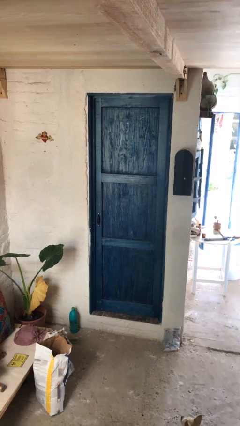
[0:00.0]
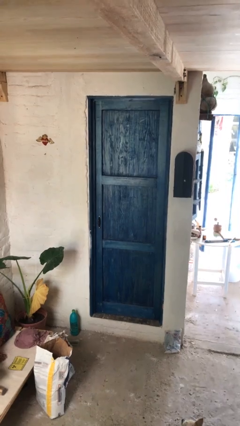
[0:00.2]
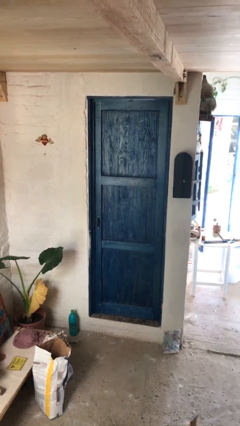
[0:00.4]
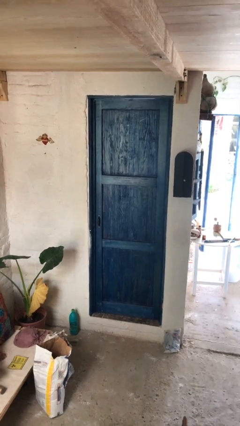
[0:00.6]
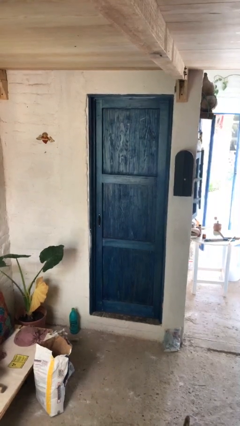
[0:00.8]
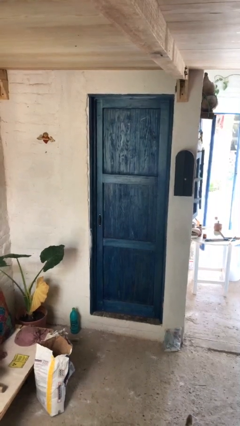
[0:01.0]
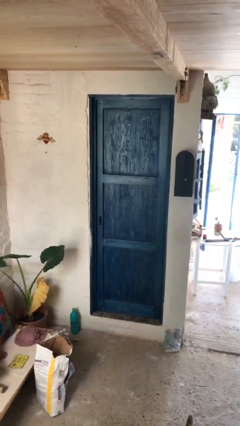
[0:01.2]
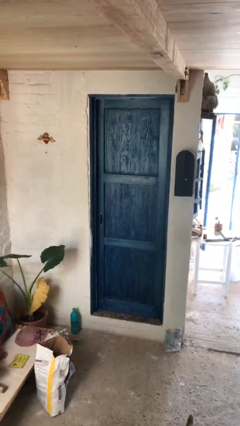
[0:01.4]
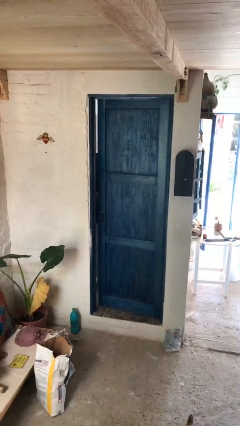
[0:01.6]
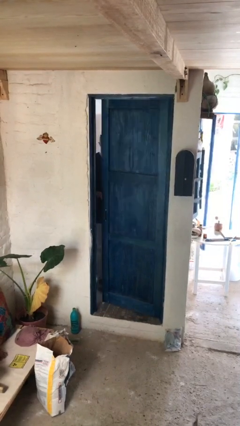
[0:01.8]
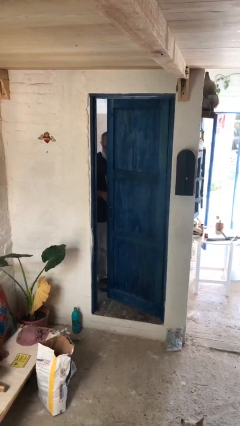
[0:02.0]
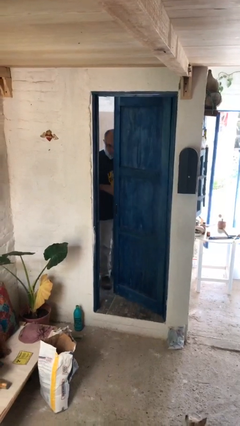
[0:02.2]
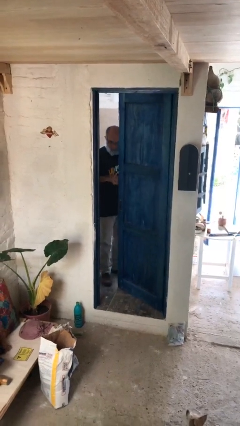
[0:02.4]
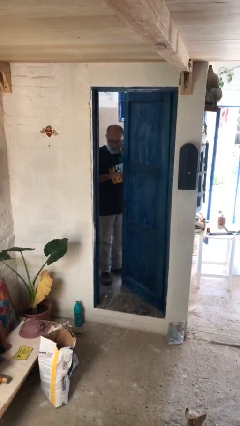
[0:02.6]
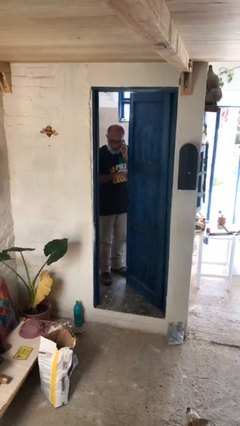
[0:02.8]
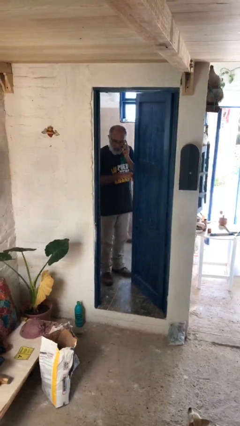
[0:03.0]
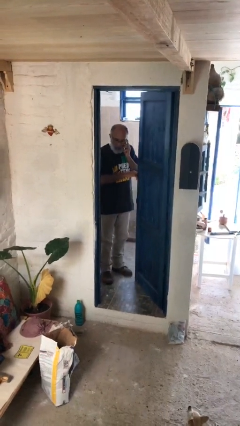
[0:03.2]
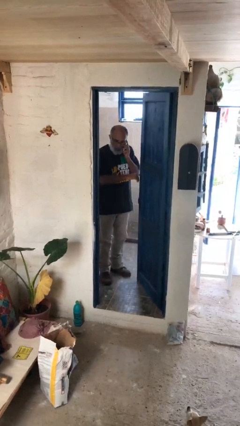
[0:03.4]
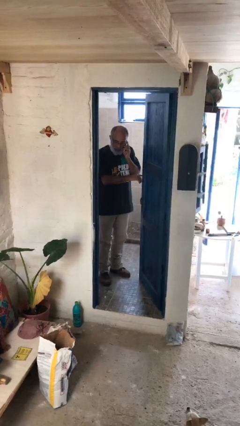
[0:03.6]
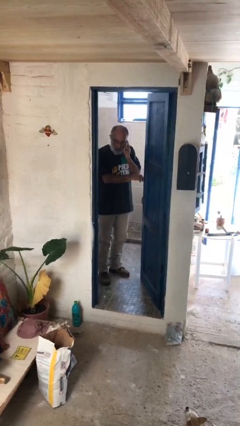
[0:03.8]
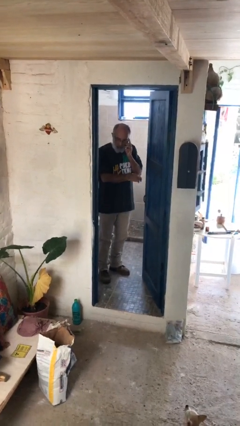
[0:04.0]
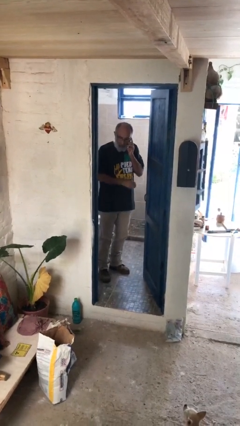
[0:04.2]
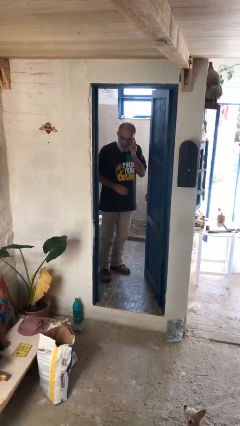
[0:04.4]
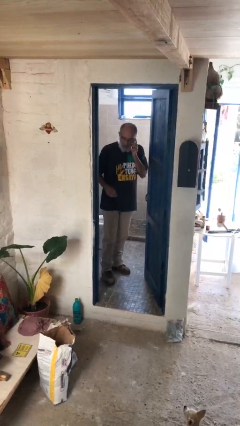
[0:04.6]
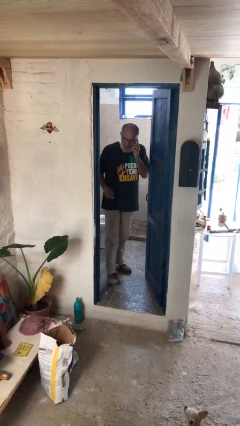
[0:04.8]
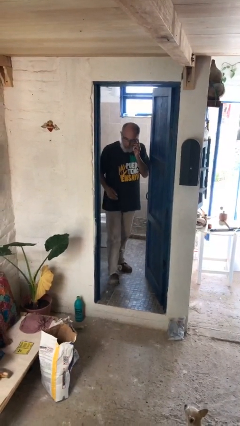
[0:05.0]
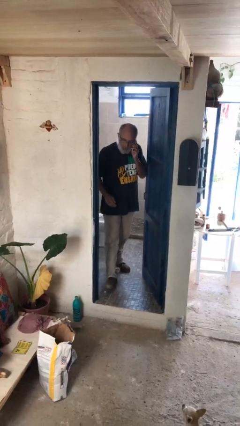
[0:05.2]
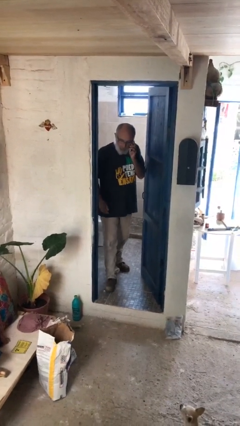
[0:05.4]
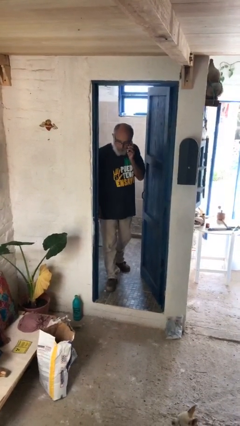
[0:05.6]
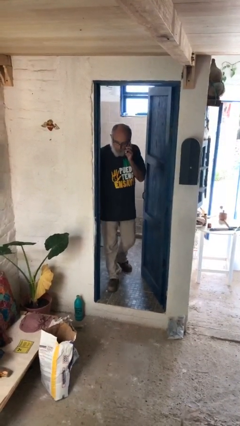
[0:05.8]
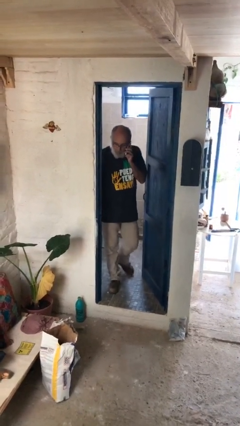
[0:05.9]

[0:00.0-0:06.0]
person opens facility door

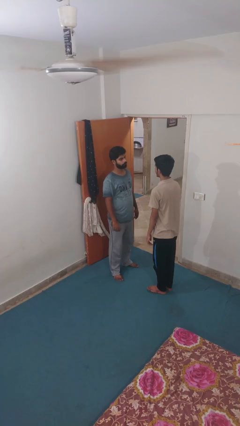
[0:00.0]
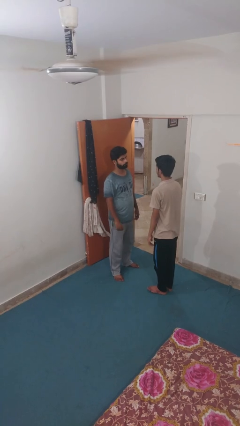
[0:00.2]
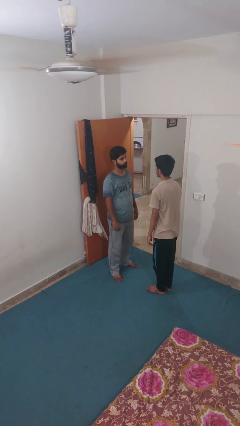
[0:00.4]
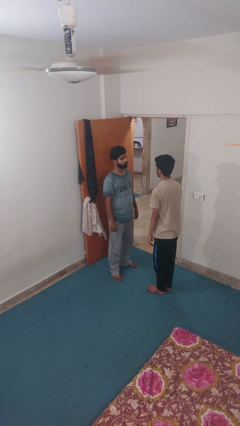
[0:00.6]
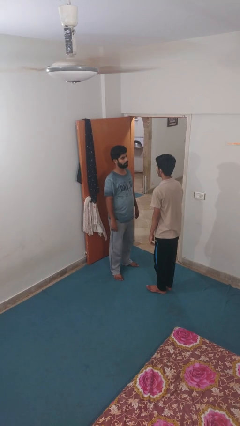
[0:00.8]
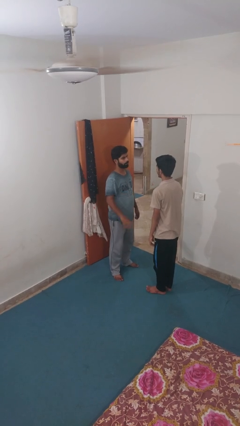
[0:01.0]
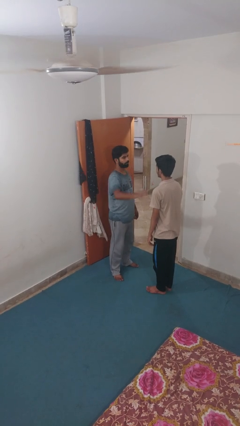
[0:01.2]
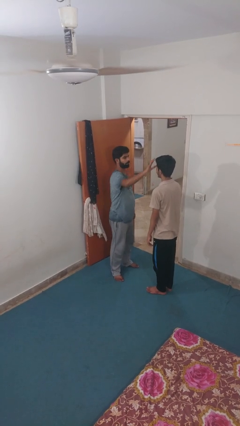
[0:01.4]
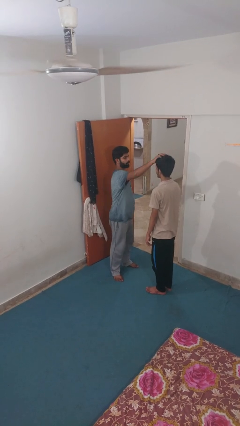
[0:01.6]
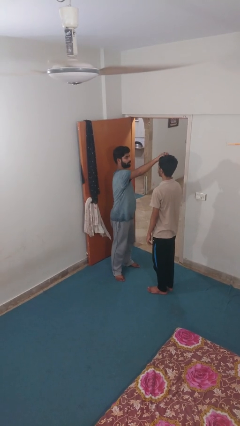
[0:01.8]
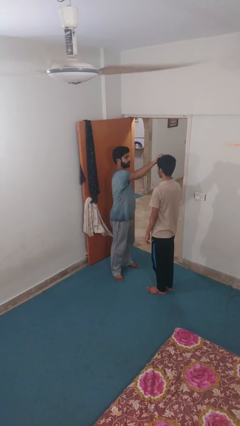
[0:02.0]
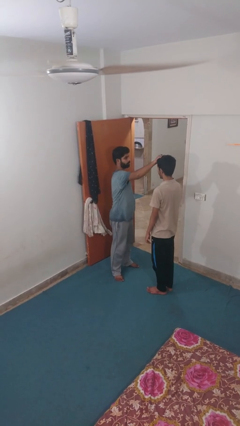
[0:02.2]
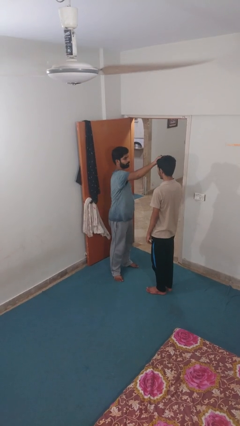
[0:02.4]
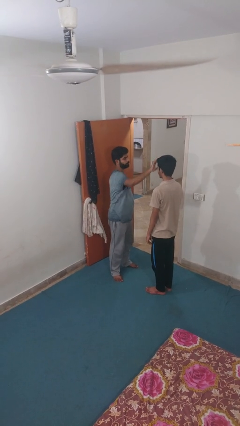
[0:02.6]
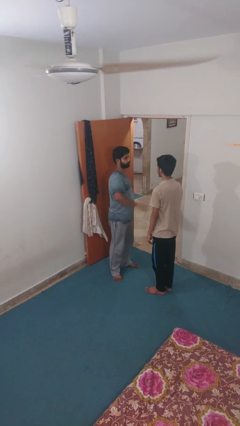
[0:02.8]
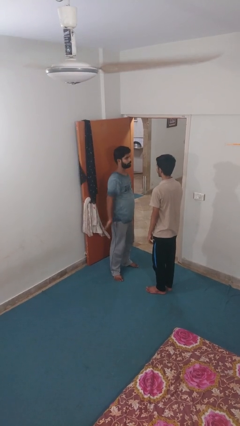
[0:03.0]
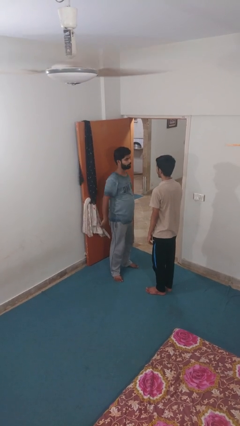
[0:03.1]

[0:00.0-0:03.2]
person grabs person by hair

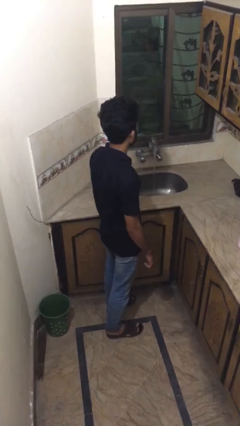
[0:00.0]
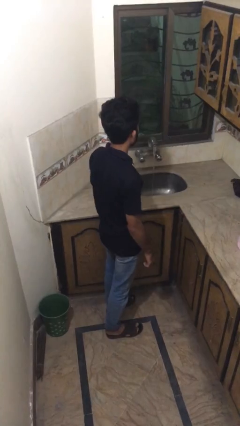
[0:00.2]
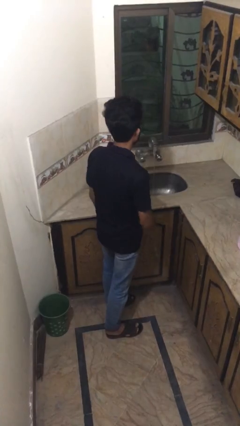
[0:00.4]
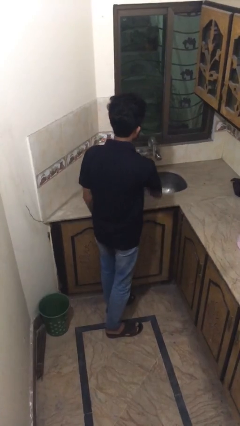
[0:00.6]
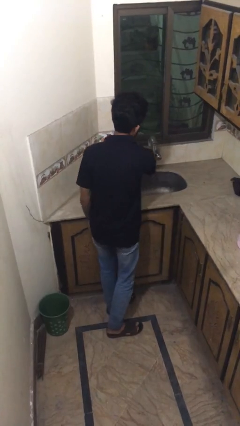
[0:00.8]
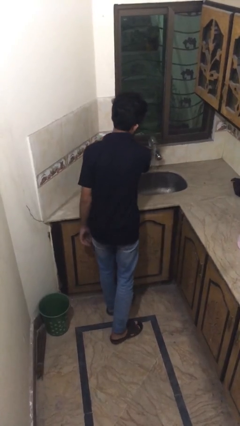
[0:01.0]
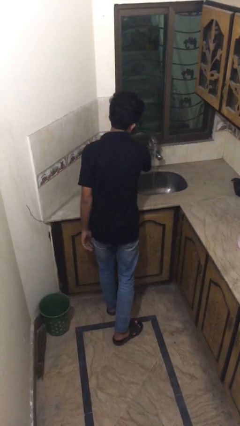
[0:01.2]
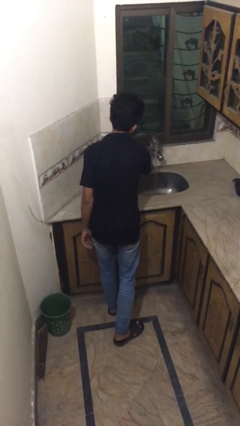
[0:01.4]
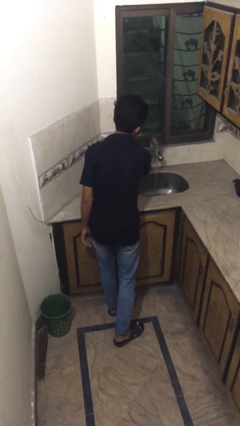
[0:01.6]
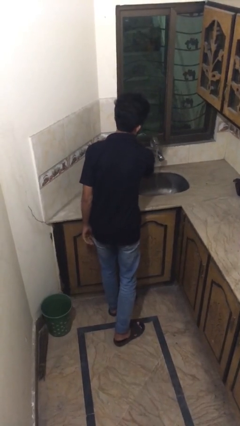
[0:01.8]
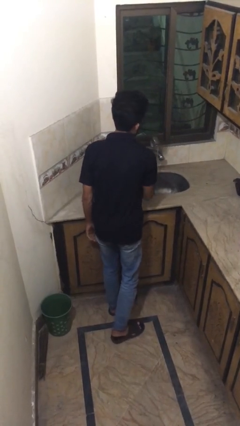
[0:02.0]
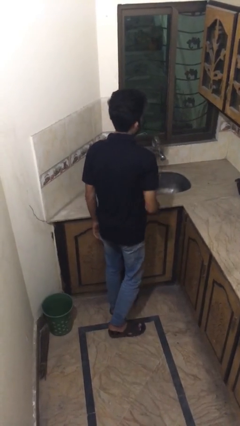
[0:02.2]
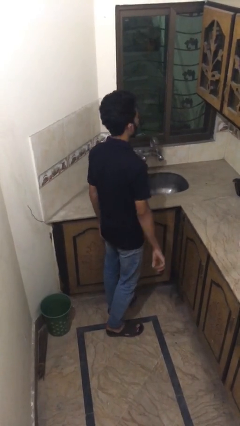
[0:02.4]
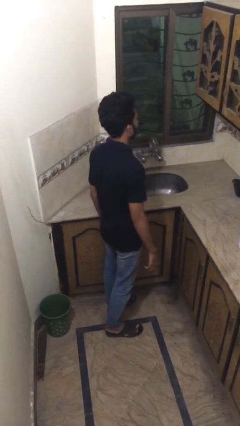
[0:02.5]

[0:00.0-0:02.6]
person turns off faucet

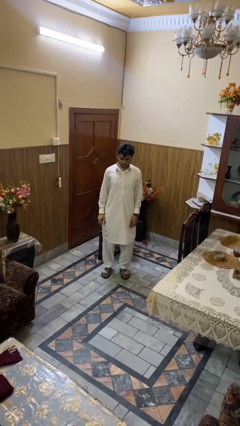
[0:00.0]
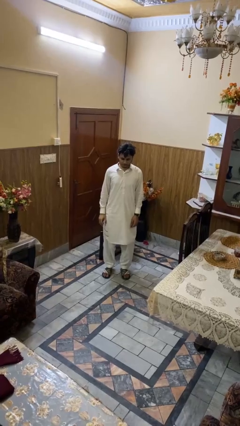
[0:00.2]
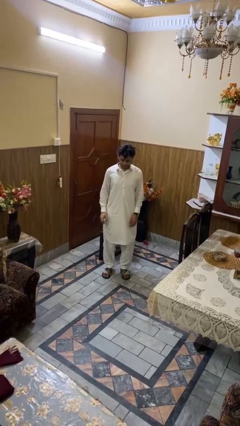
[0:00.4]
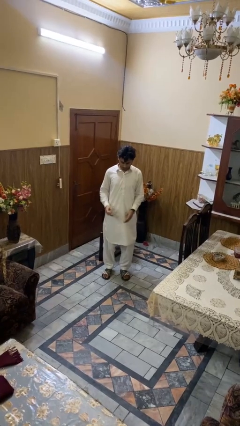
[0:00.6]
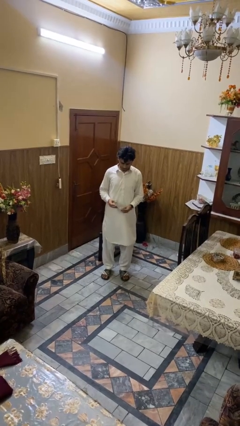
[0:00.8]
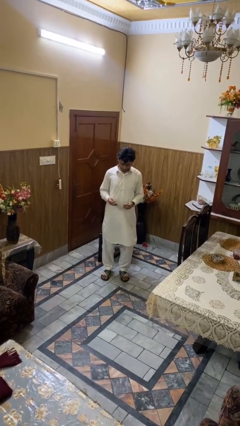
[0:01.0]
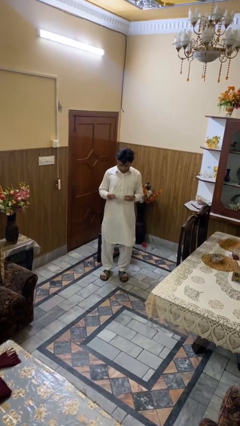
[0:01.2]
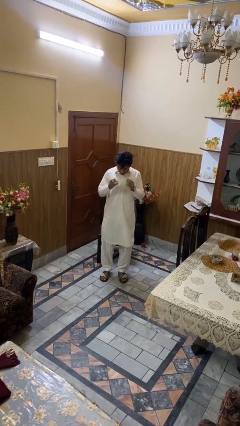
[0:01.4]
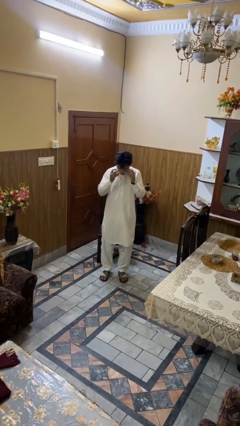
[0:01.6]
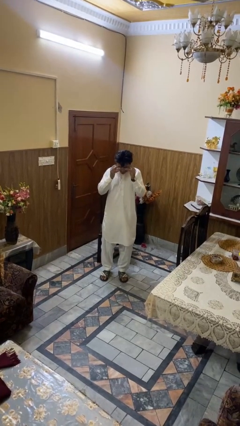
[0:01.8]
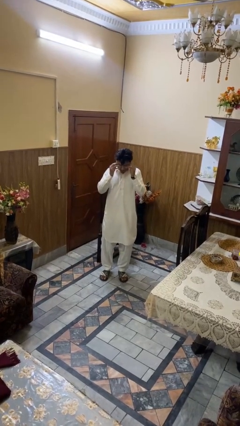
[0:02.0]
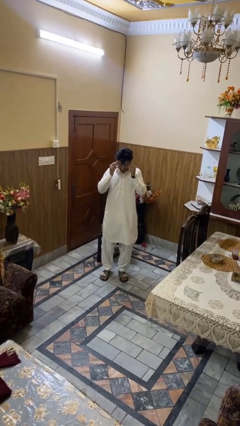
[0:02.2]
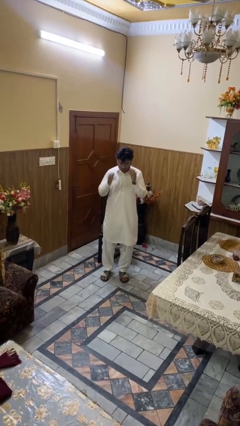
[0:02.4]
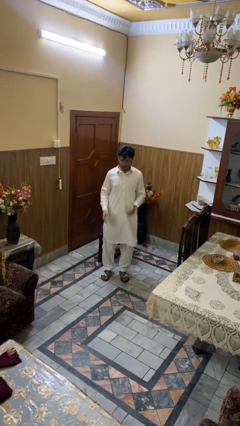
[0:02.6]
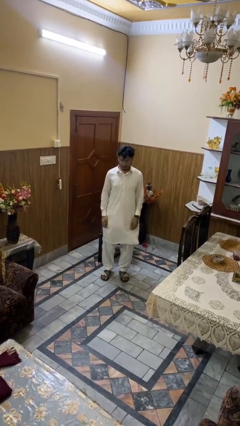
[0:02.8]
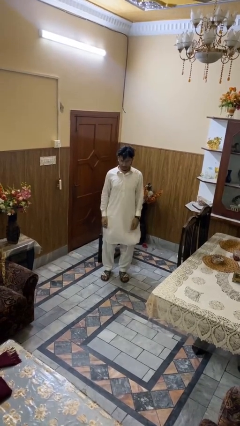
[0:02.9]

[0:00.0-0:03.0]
person puts on glasses

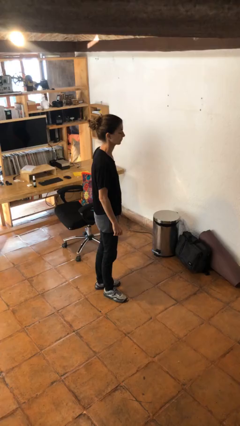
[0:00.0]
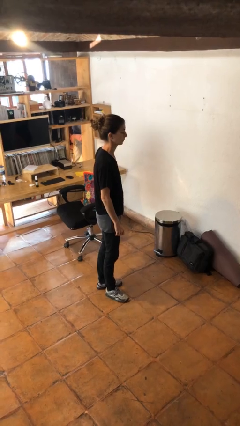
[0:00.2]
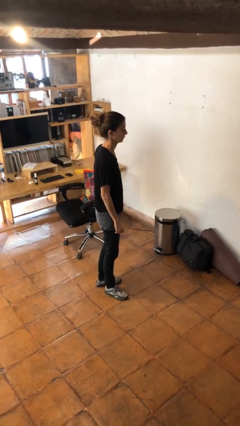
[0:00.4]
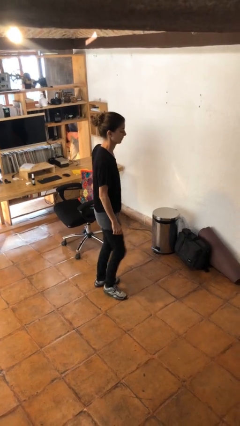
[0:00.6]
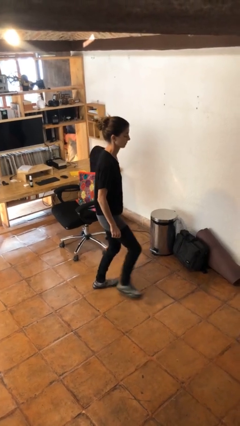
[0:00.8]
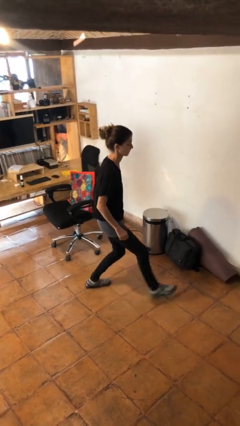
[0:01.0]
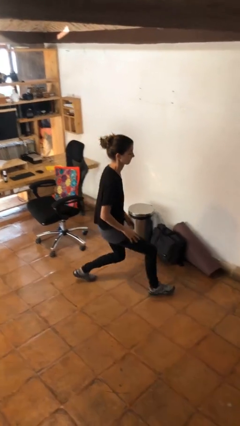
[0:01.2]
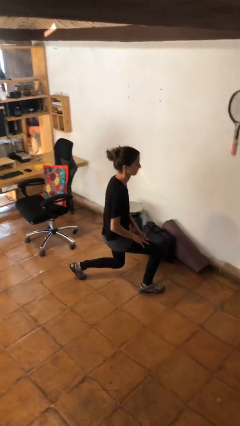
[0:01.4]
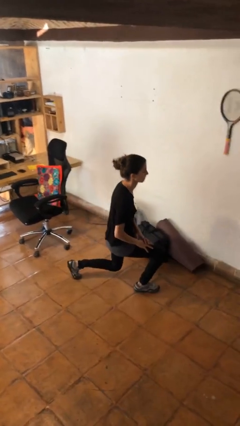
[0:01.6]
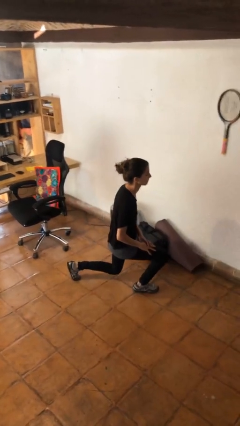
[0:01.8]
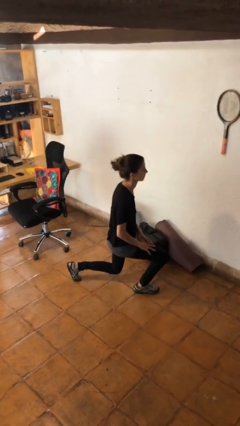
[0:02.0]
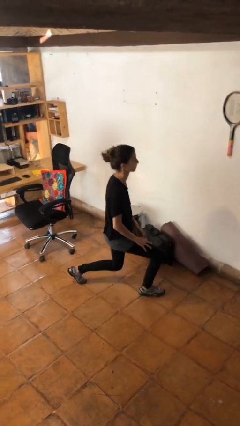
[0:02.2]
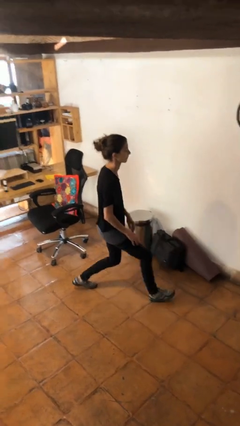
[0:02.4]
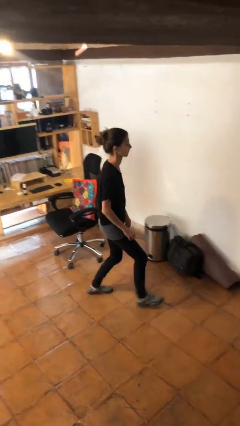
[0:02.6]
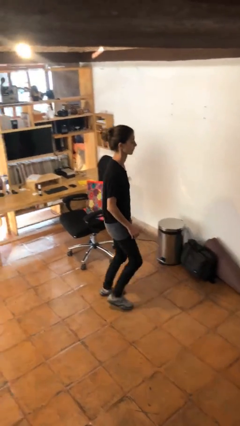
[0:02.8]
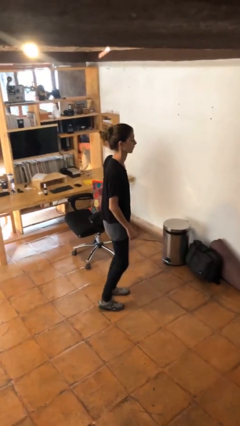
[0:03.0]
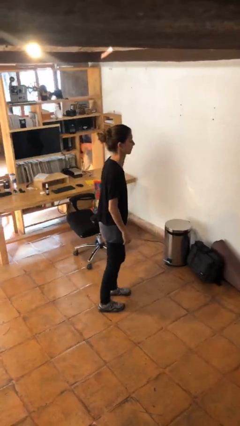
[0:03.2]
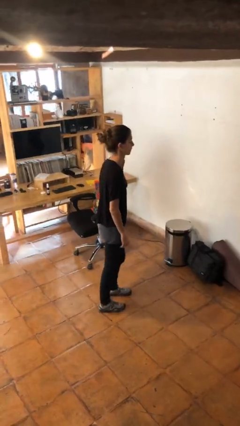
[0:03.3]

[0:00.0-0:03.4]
person exercises with lunges
